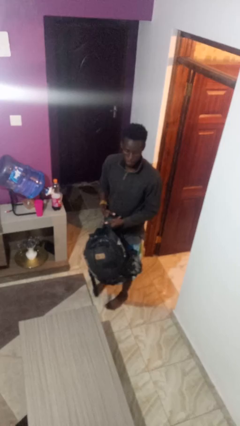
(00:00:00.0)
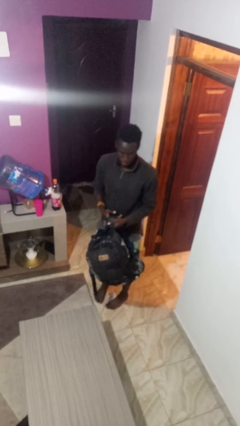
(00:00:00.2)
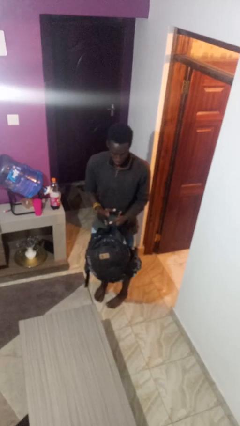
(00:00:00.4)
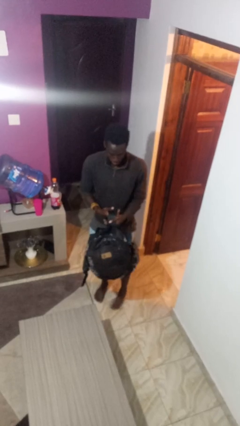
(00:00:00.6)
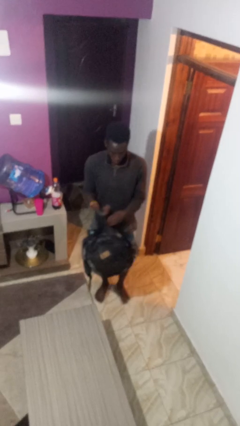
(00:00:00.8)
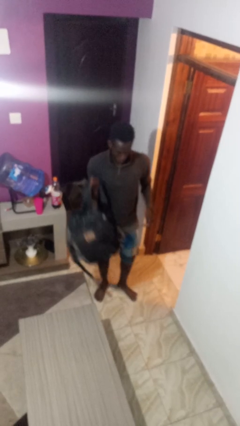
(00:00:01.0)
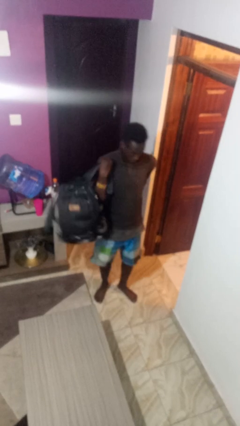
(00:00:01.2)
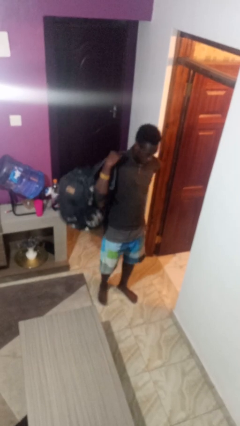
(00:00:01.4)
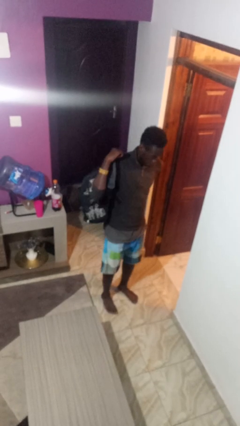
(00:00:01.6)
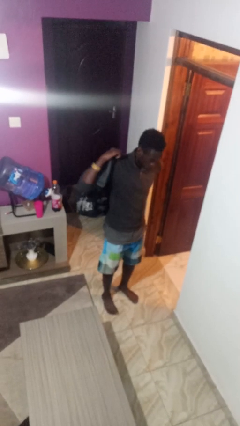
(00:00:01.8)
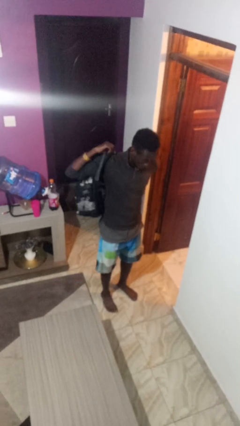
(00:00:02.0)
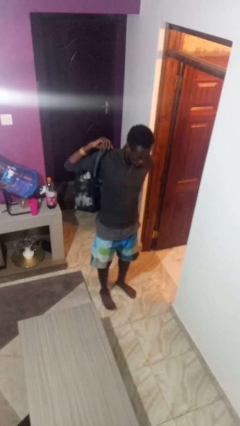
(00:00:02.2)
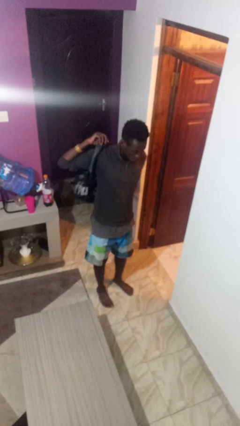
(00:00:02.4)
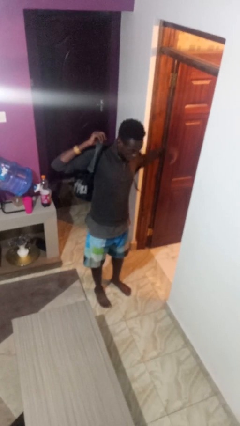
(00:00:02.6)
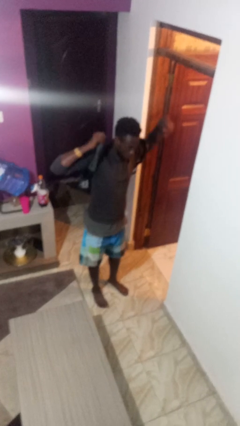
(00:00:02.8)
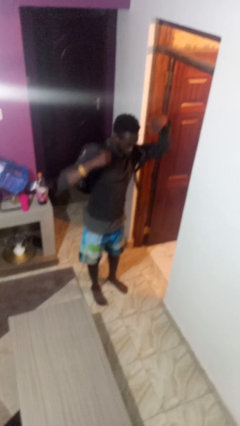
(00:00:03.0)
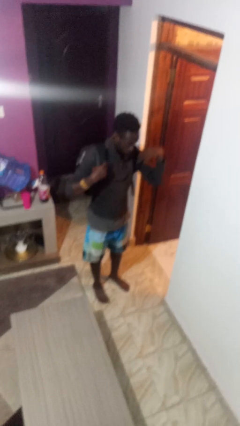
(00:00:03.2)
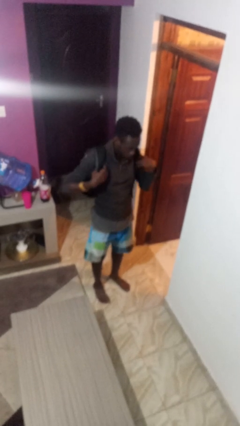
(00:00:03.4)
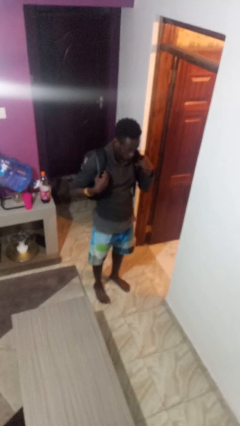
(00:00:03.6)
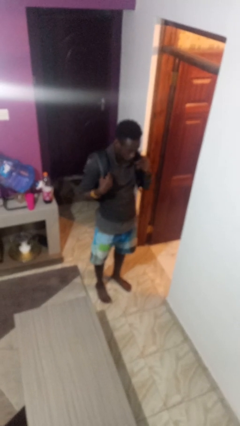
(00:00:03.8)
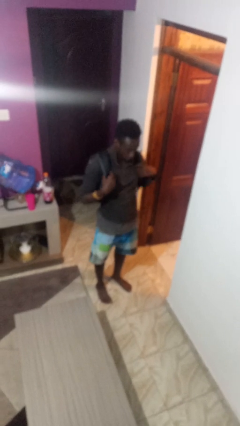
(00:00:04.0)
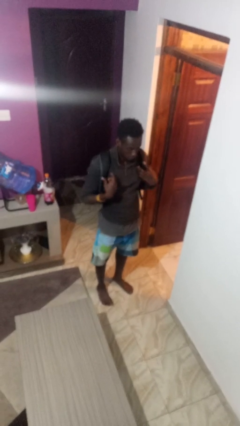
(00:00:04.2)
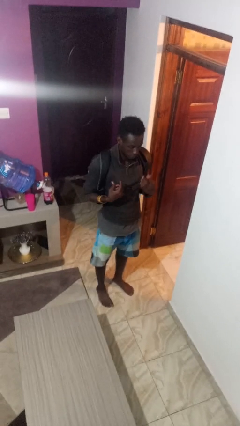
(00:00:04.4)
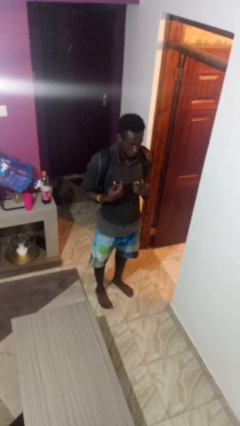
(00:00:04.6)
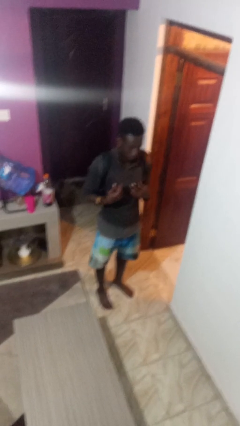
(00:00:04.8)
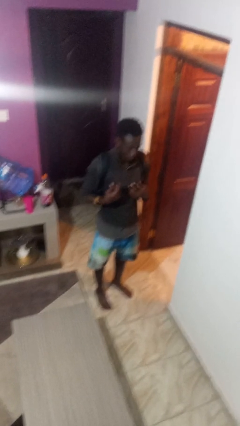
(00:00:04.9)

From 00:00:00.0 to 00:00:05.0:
person puts on backpack

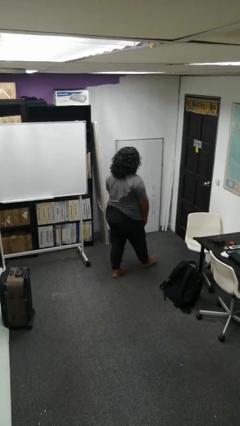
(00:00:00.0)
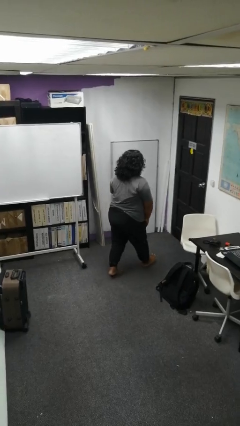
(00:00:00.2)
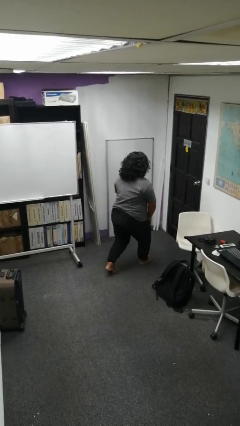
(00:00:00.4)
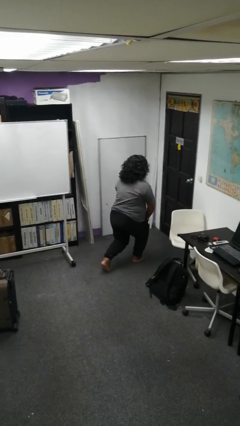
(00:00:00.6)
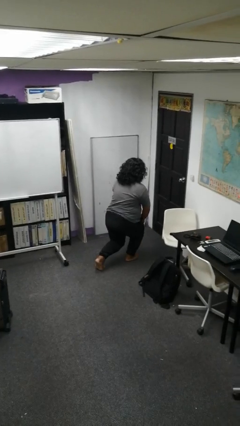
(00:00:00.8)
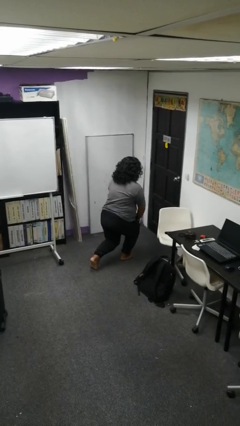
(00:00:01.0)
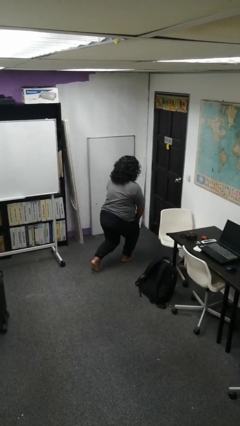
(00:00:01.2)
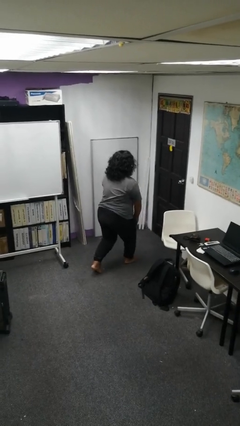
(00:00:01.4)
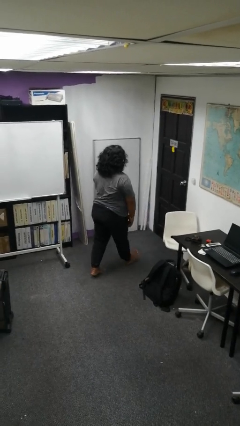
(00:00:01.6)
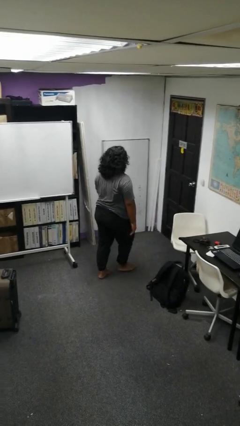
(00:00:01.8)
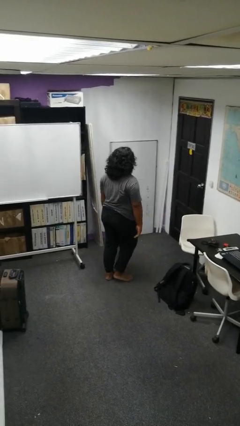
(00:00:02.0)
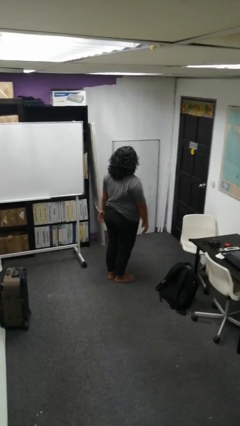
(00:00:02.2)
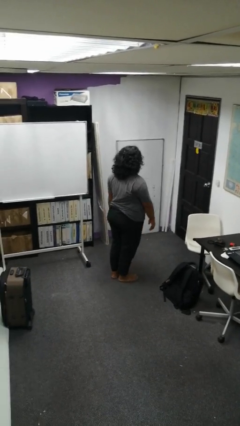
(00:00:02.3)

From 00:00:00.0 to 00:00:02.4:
person exercises with lunges

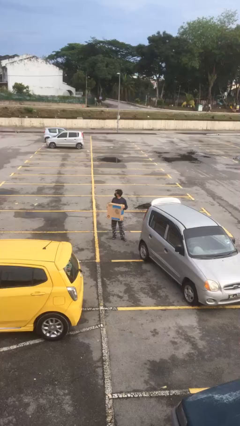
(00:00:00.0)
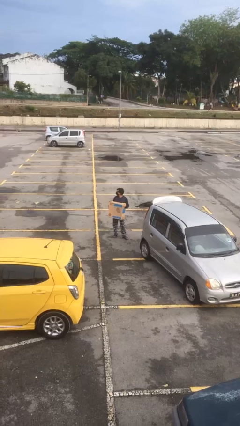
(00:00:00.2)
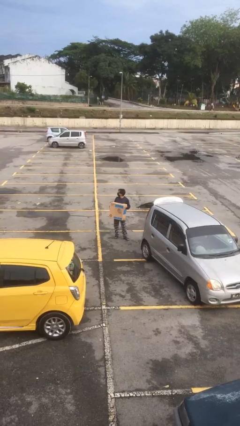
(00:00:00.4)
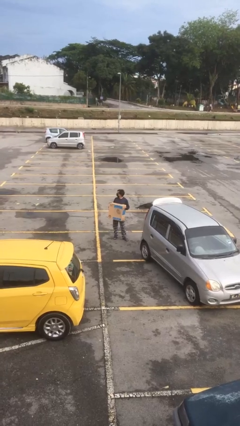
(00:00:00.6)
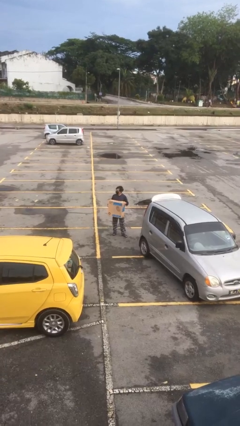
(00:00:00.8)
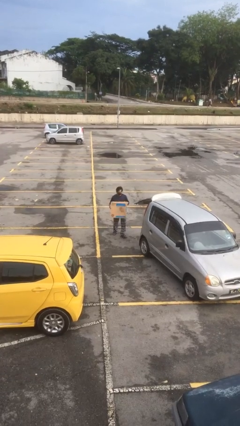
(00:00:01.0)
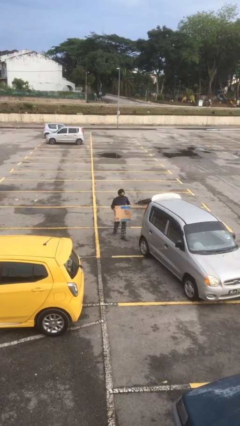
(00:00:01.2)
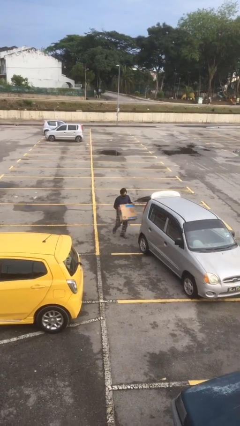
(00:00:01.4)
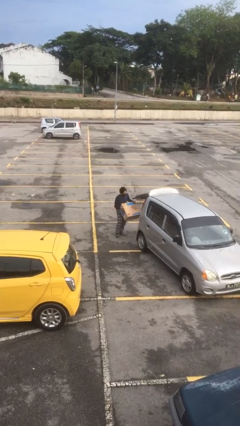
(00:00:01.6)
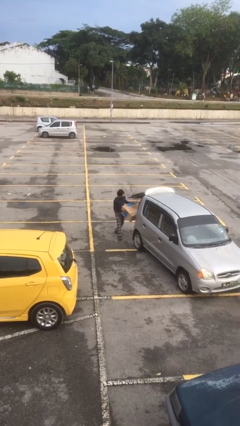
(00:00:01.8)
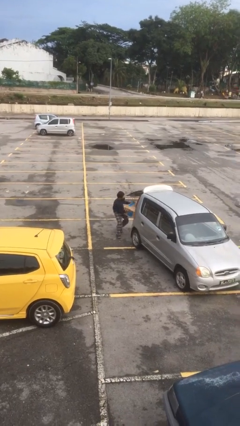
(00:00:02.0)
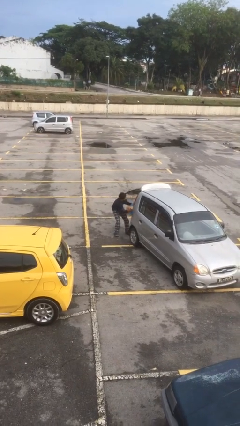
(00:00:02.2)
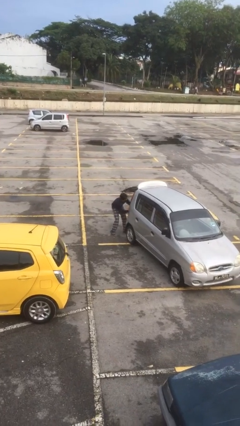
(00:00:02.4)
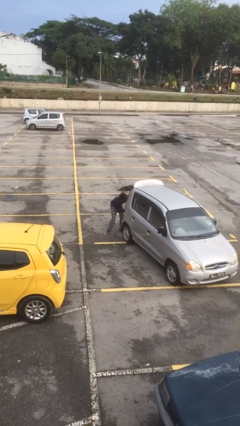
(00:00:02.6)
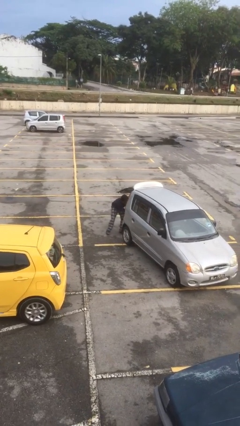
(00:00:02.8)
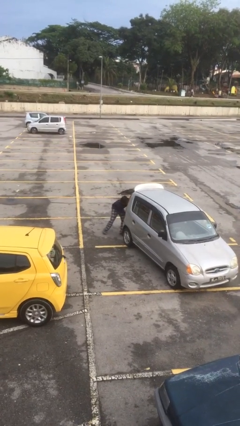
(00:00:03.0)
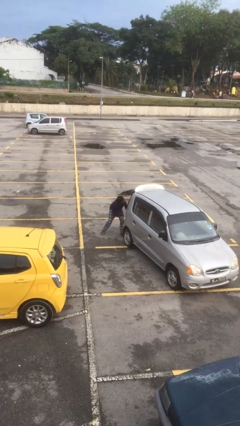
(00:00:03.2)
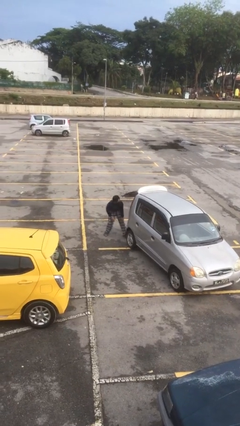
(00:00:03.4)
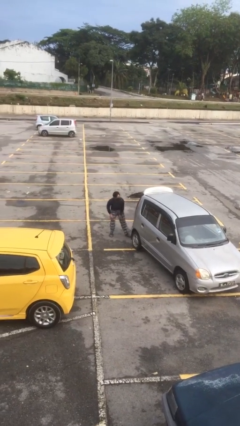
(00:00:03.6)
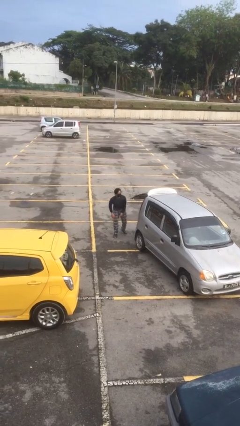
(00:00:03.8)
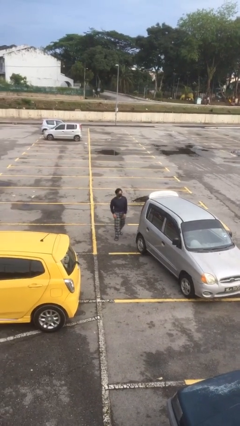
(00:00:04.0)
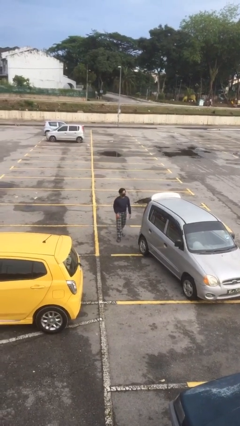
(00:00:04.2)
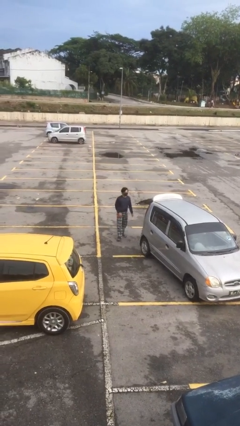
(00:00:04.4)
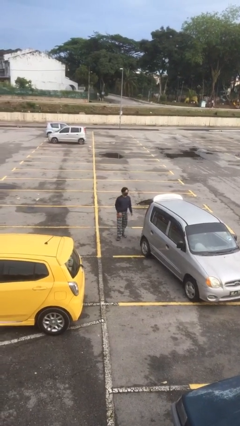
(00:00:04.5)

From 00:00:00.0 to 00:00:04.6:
person loads car

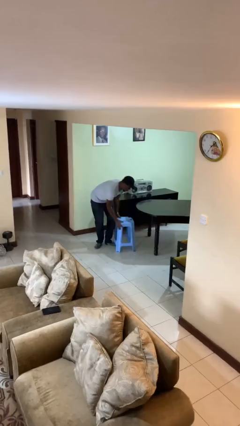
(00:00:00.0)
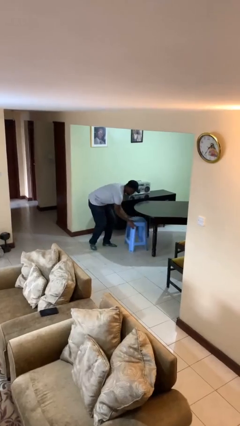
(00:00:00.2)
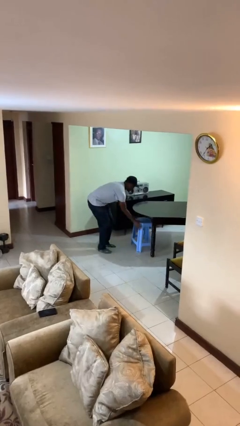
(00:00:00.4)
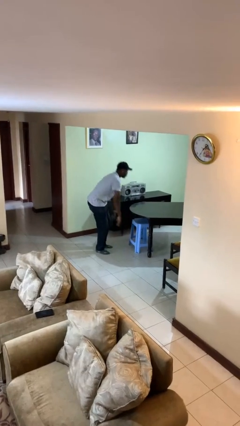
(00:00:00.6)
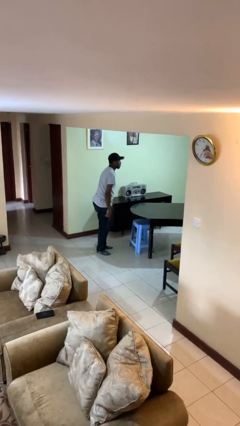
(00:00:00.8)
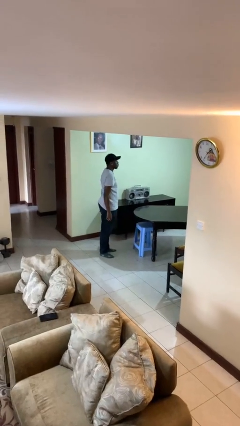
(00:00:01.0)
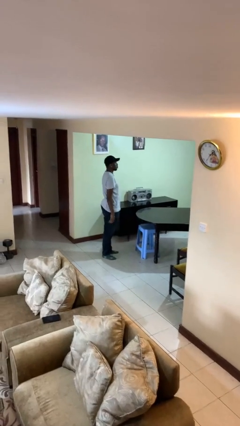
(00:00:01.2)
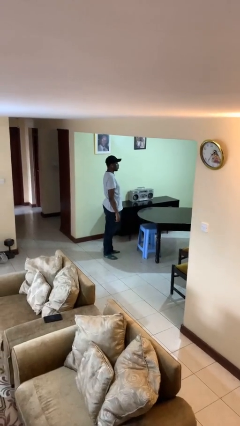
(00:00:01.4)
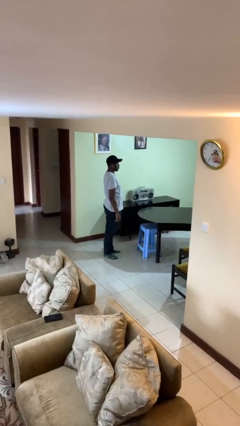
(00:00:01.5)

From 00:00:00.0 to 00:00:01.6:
person stands up

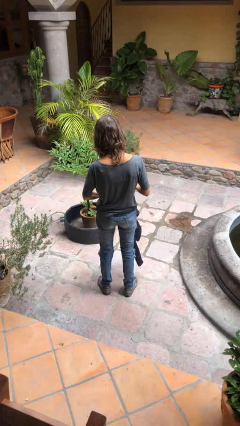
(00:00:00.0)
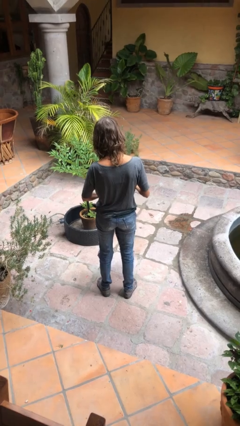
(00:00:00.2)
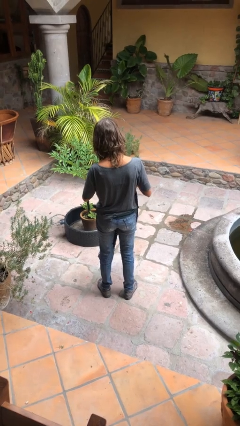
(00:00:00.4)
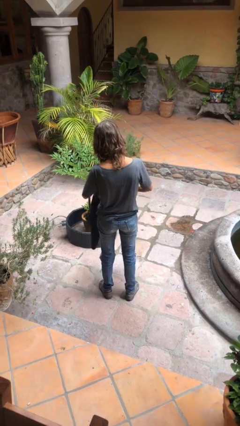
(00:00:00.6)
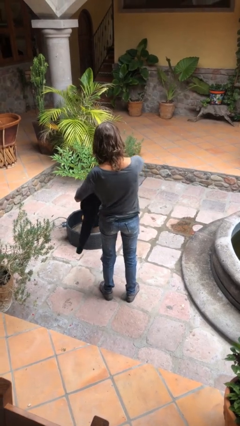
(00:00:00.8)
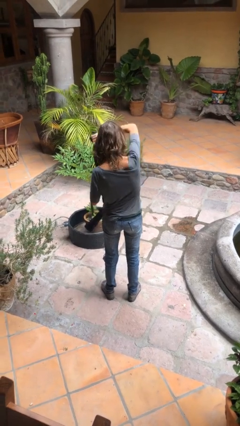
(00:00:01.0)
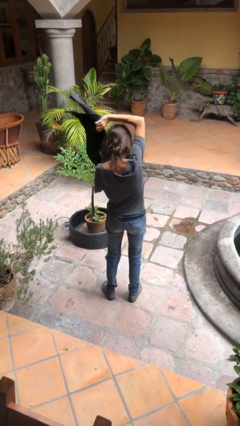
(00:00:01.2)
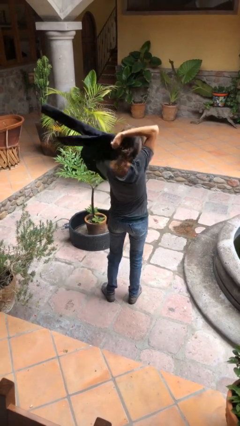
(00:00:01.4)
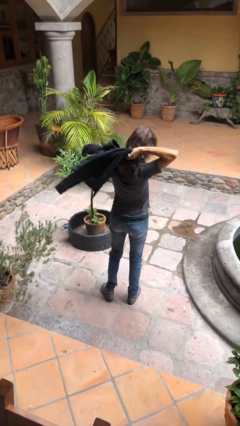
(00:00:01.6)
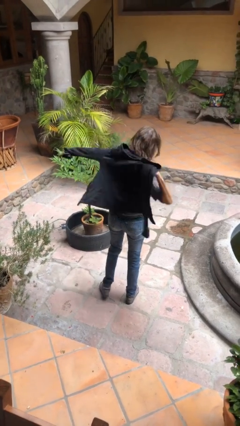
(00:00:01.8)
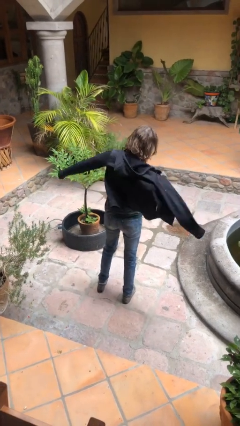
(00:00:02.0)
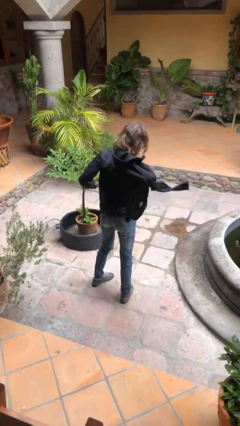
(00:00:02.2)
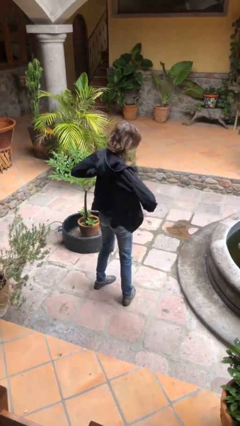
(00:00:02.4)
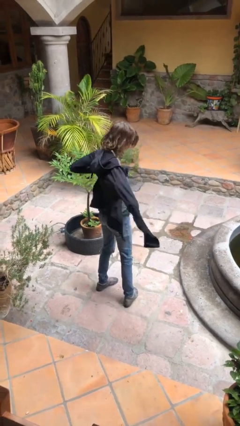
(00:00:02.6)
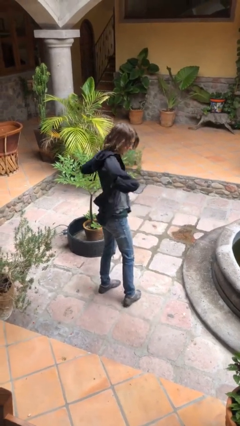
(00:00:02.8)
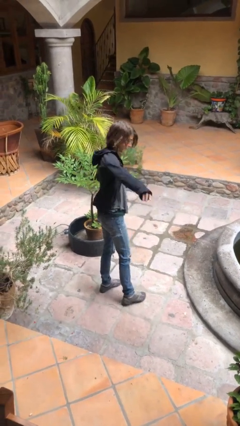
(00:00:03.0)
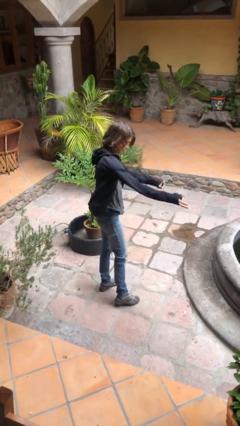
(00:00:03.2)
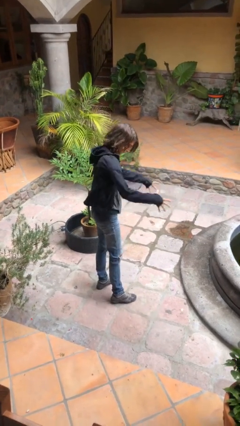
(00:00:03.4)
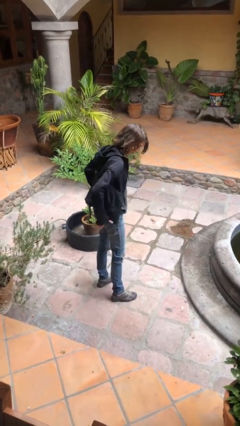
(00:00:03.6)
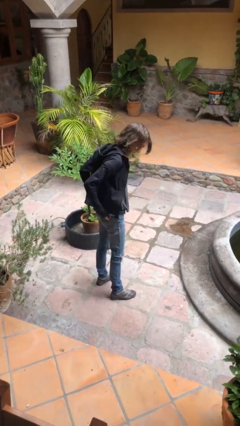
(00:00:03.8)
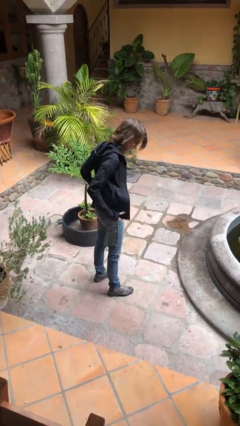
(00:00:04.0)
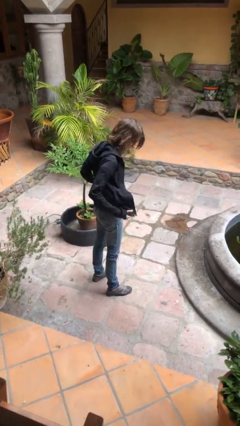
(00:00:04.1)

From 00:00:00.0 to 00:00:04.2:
person puts on jacket
